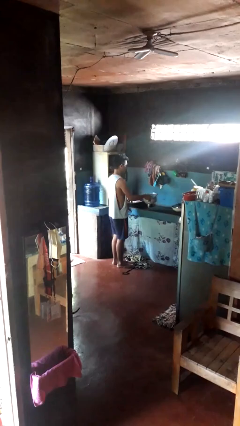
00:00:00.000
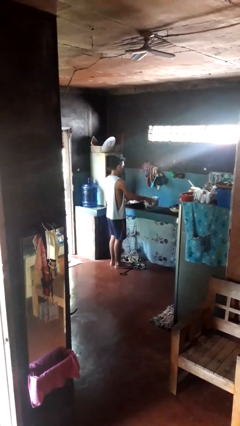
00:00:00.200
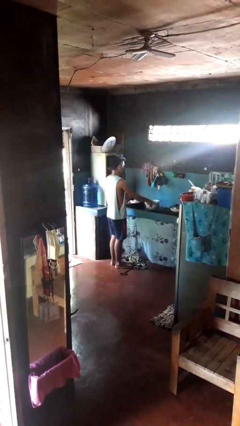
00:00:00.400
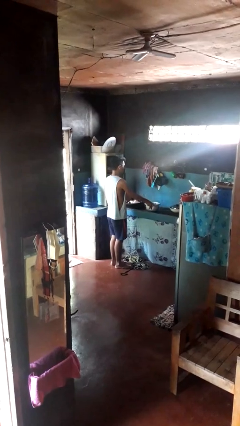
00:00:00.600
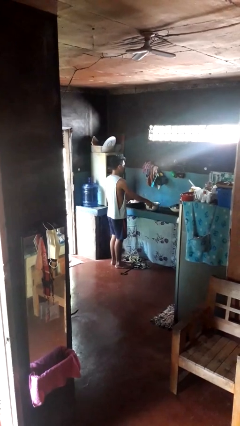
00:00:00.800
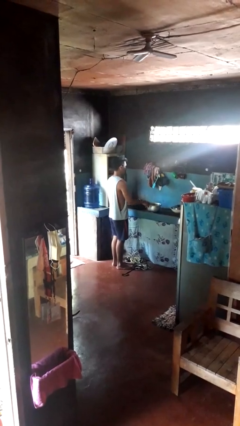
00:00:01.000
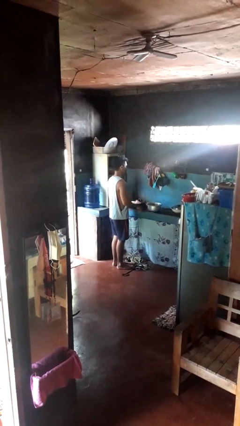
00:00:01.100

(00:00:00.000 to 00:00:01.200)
person puts down object on countertop

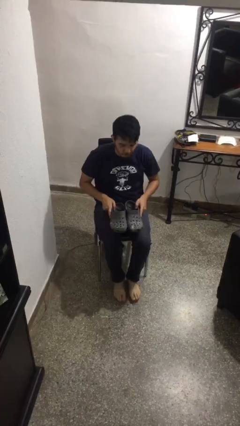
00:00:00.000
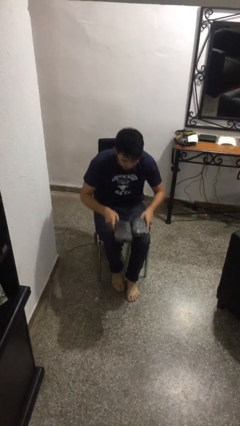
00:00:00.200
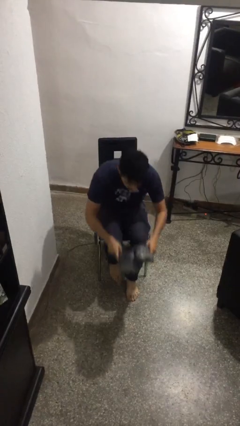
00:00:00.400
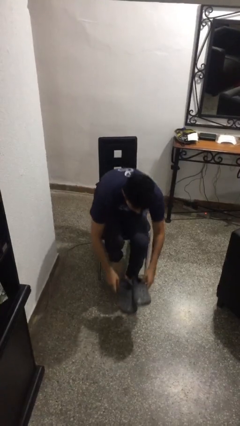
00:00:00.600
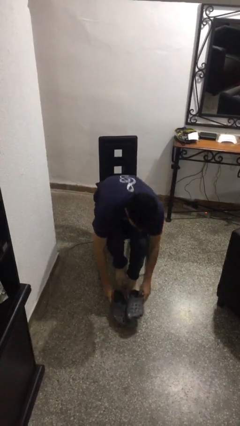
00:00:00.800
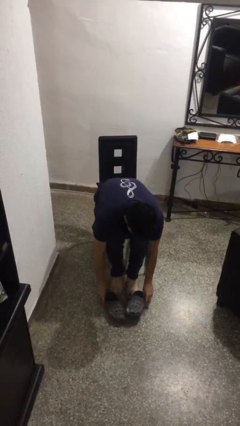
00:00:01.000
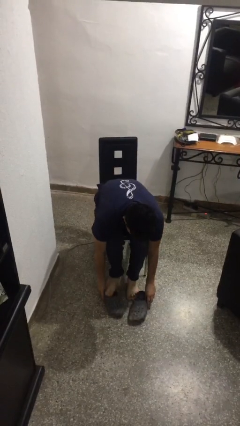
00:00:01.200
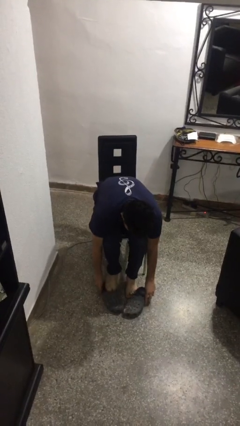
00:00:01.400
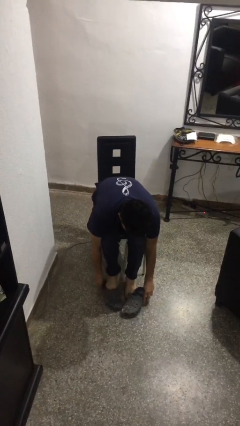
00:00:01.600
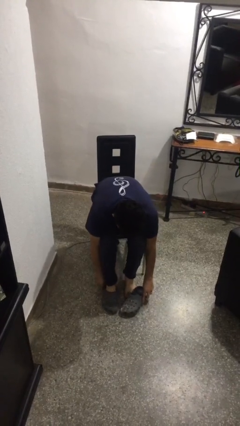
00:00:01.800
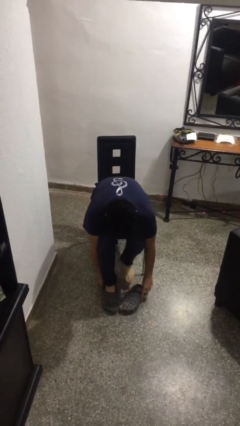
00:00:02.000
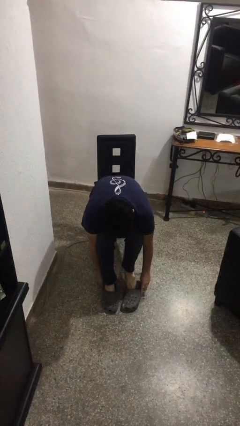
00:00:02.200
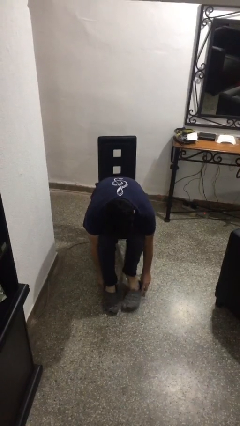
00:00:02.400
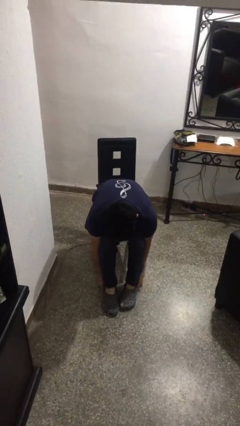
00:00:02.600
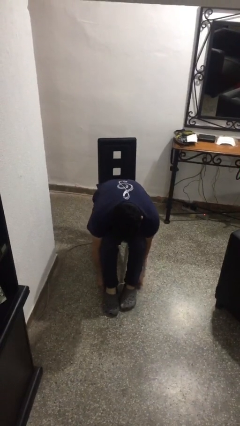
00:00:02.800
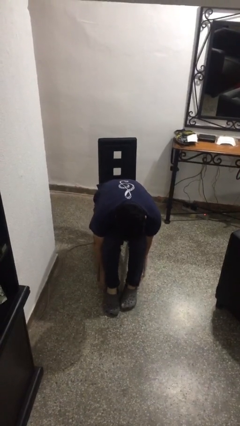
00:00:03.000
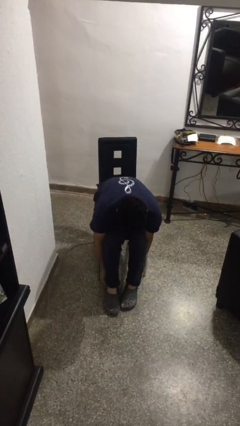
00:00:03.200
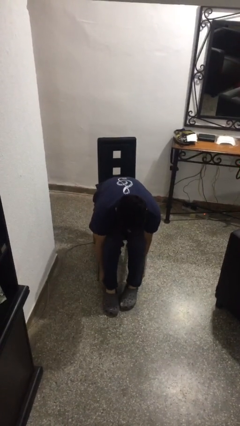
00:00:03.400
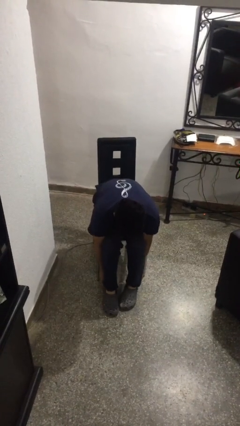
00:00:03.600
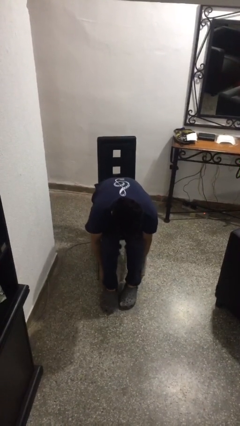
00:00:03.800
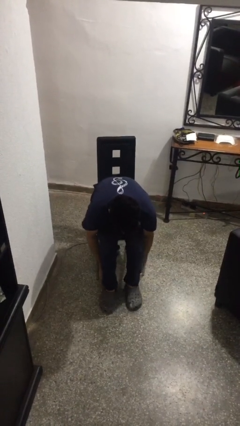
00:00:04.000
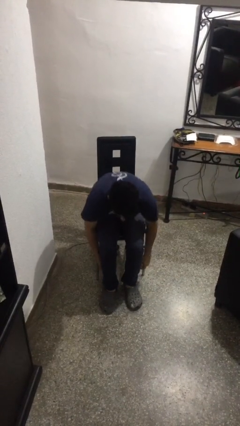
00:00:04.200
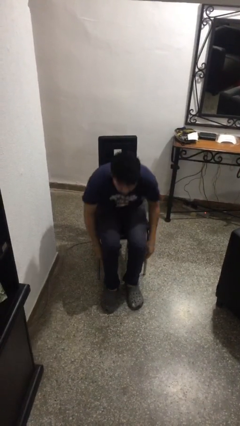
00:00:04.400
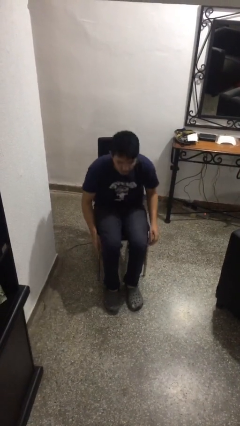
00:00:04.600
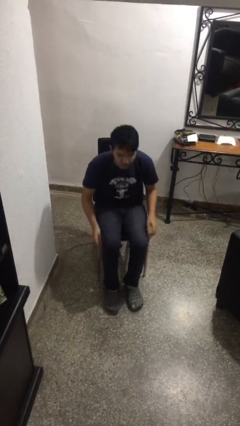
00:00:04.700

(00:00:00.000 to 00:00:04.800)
person puts on shoes

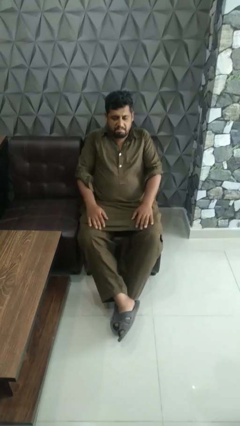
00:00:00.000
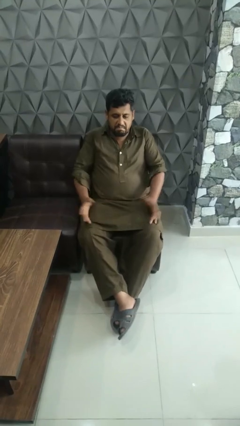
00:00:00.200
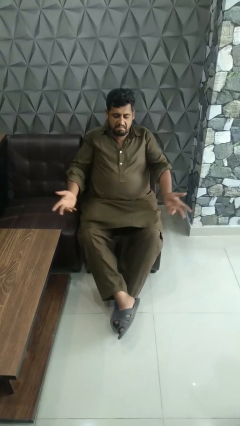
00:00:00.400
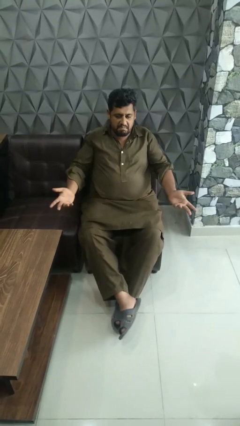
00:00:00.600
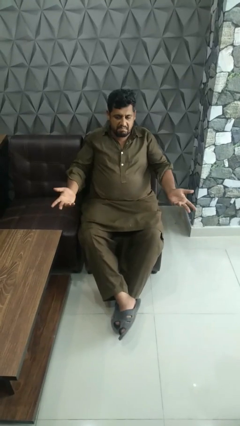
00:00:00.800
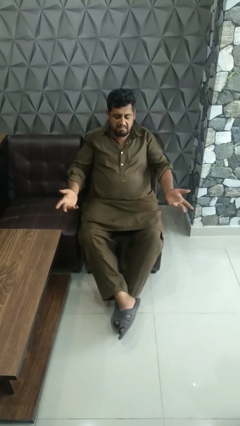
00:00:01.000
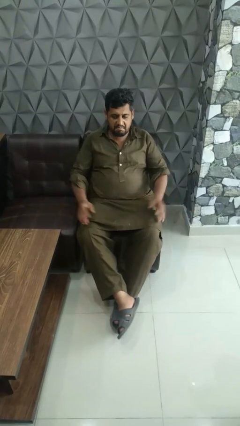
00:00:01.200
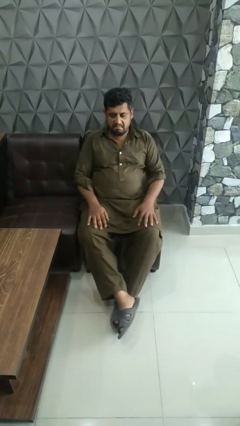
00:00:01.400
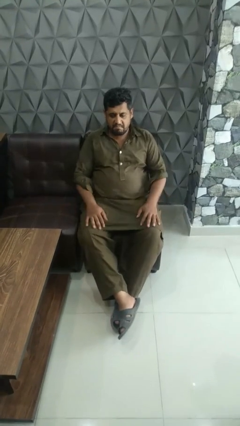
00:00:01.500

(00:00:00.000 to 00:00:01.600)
person shrugs

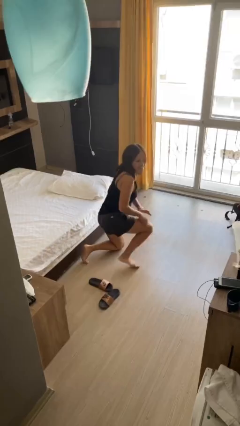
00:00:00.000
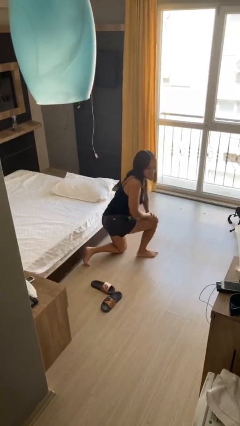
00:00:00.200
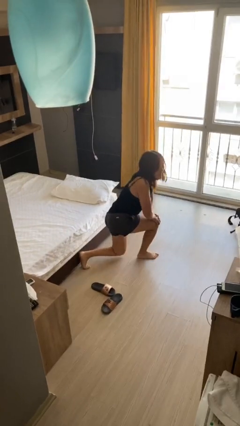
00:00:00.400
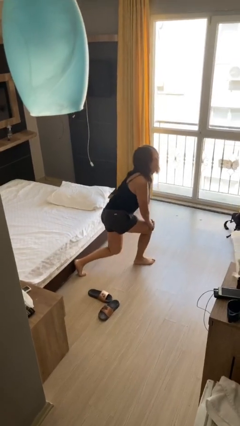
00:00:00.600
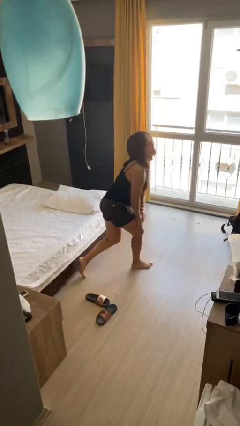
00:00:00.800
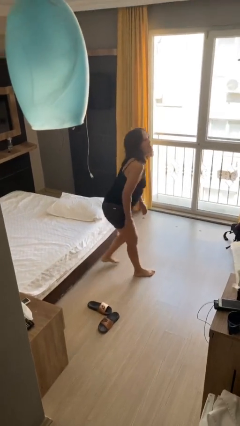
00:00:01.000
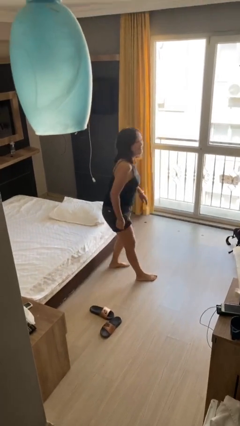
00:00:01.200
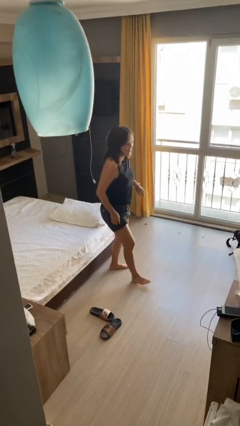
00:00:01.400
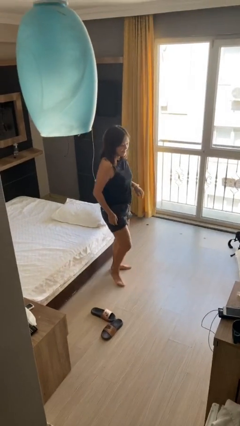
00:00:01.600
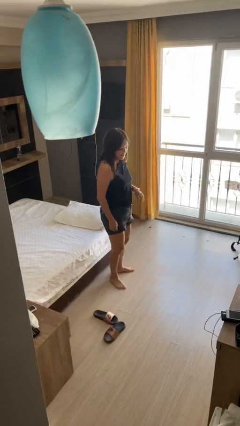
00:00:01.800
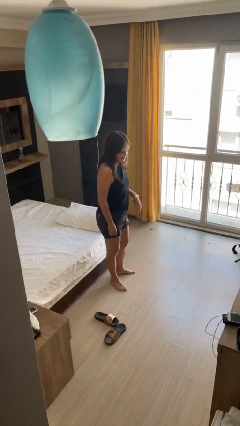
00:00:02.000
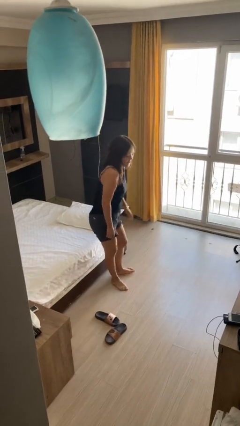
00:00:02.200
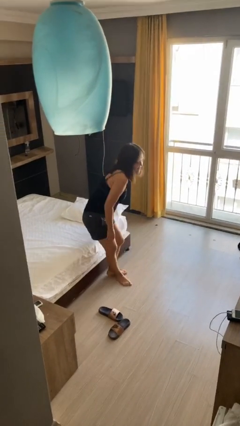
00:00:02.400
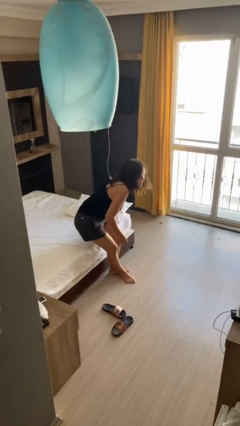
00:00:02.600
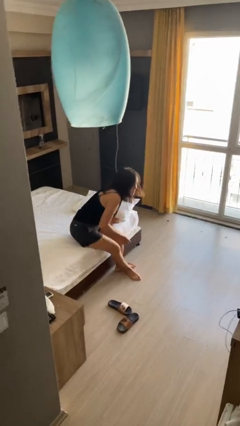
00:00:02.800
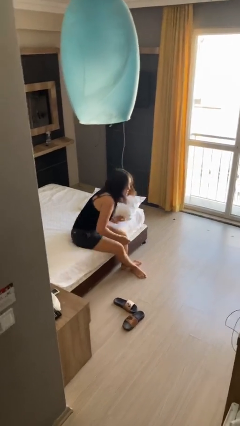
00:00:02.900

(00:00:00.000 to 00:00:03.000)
person stands up from floor

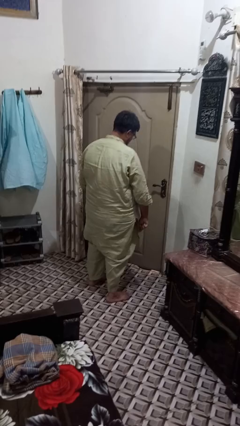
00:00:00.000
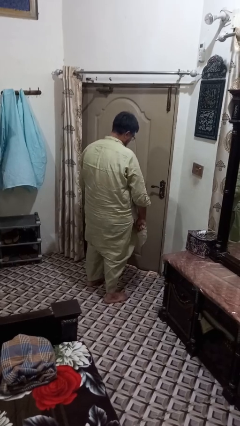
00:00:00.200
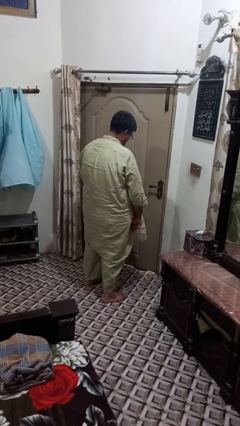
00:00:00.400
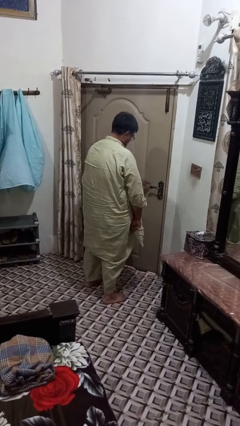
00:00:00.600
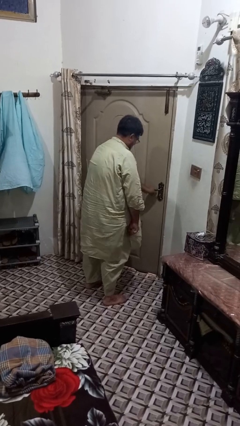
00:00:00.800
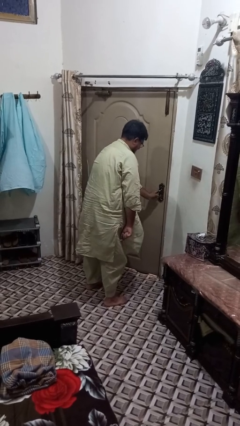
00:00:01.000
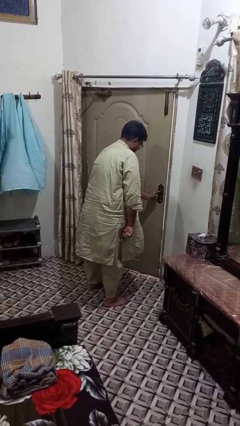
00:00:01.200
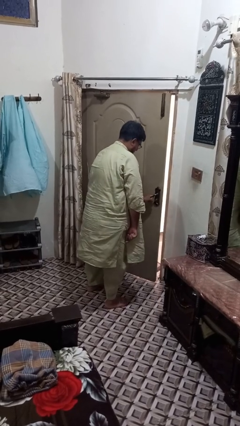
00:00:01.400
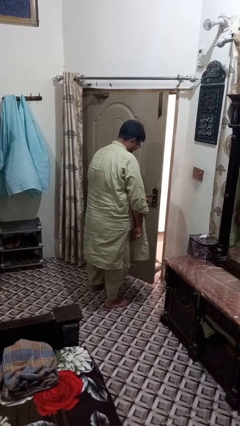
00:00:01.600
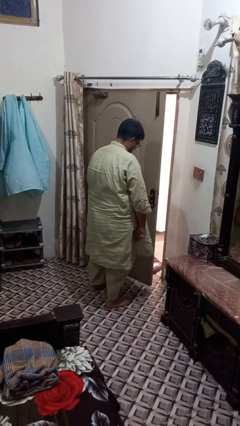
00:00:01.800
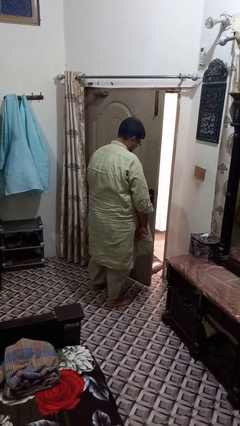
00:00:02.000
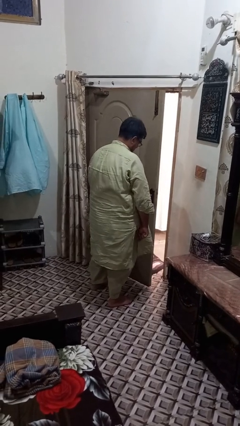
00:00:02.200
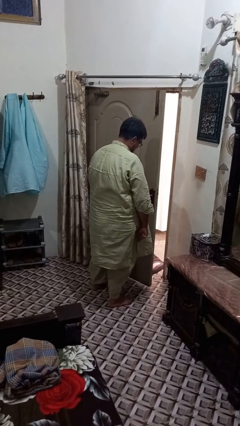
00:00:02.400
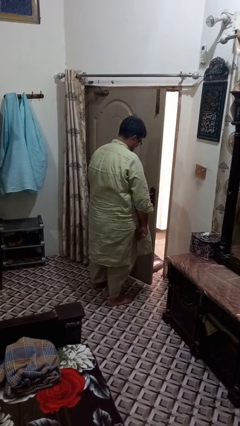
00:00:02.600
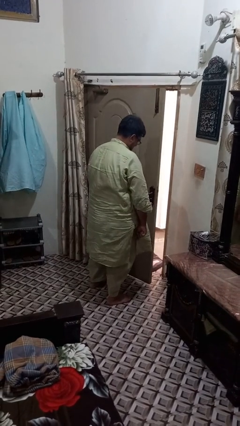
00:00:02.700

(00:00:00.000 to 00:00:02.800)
person opens facility door

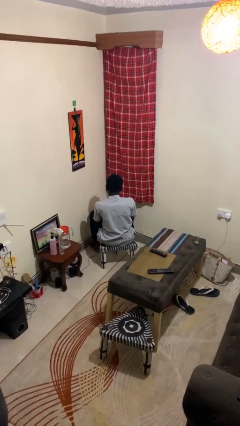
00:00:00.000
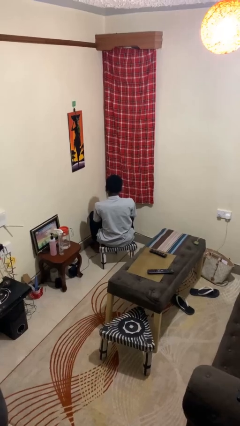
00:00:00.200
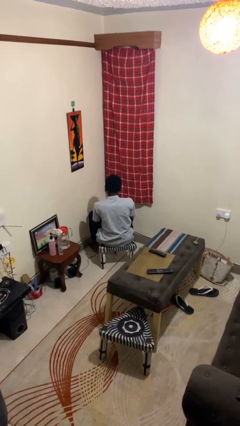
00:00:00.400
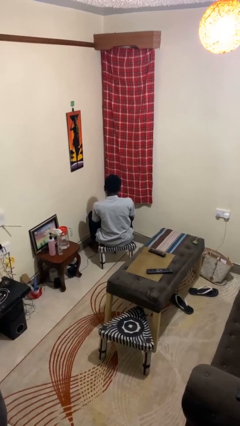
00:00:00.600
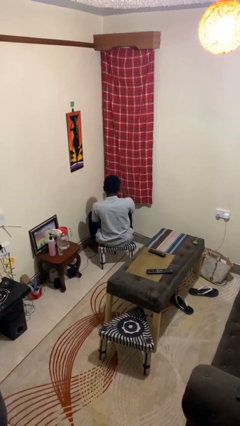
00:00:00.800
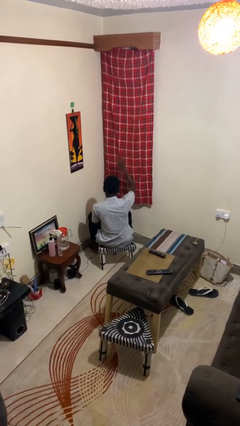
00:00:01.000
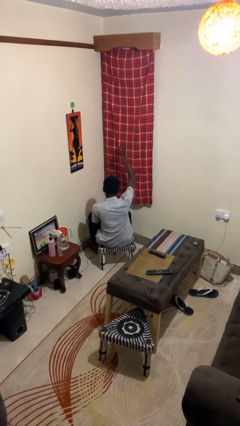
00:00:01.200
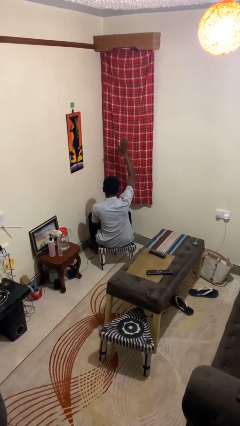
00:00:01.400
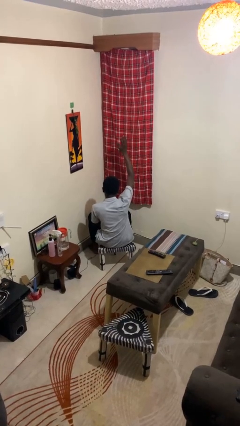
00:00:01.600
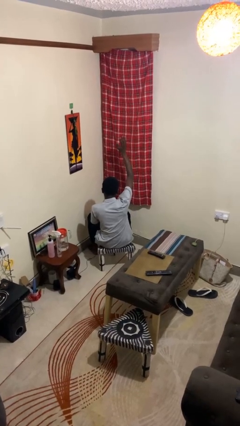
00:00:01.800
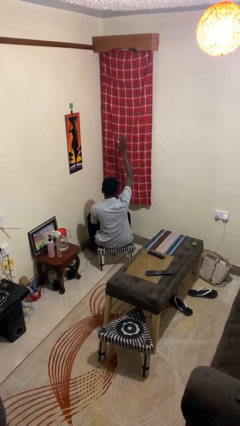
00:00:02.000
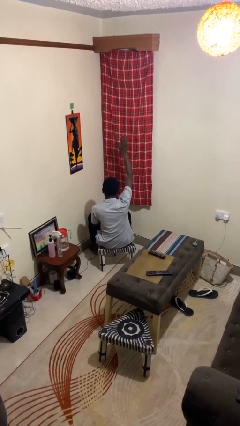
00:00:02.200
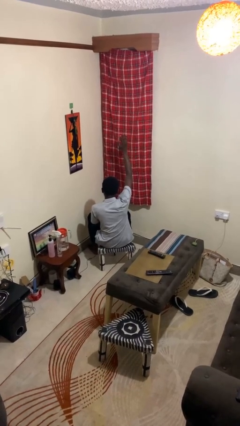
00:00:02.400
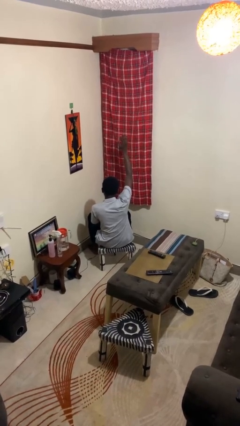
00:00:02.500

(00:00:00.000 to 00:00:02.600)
person gestures raise hand

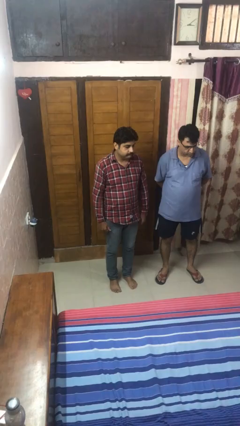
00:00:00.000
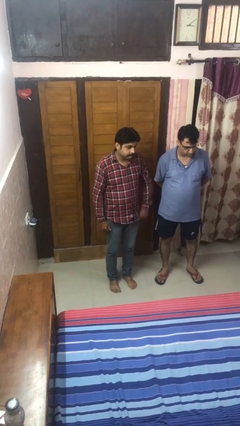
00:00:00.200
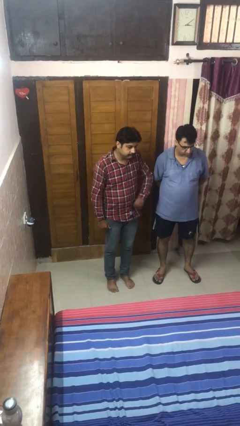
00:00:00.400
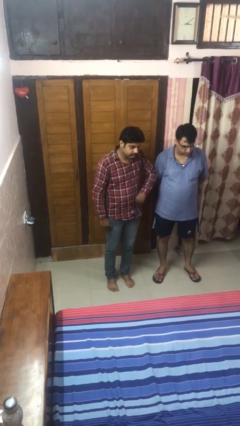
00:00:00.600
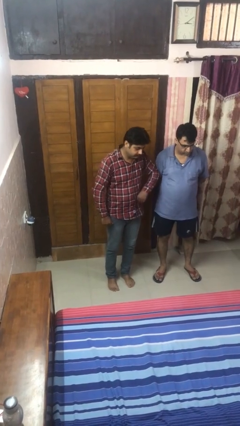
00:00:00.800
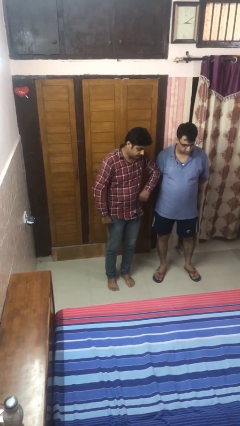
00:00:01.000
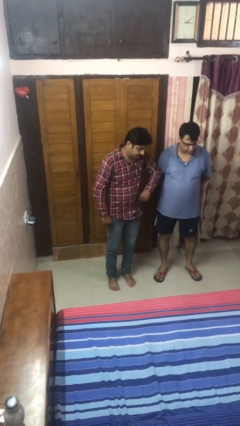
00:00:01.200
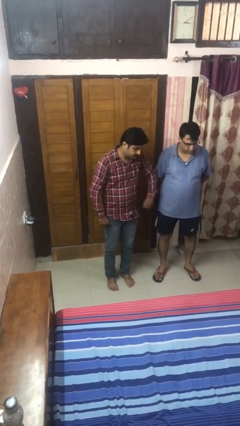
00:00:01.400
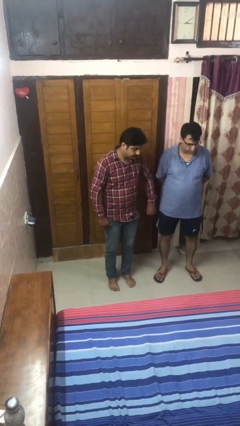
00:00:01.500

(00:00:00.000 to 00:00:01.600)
person nudges person with elbow
